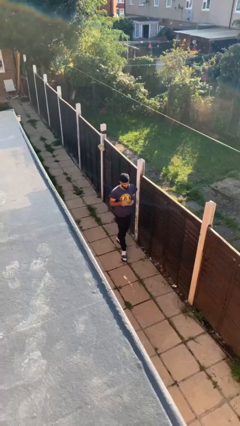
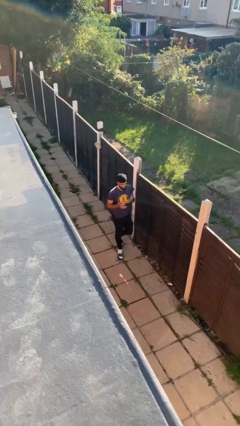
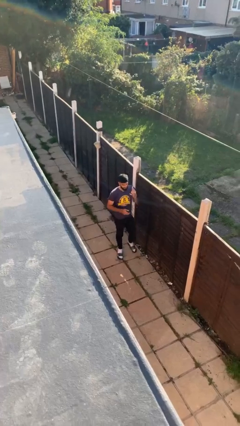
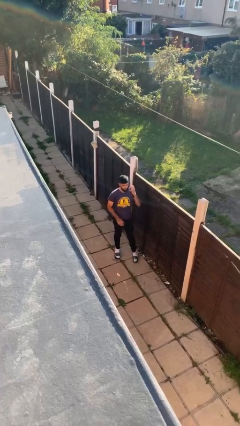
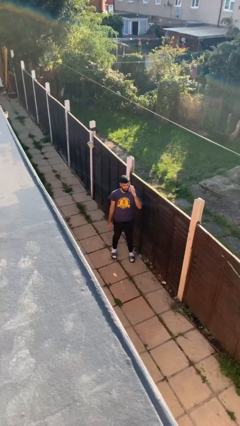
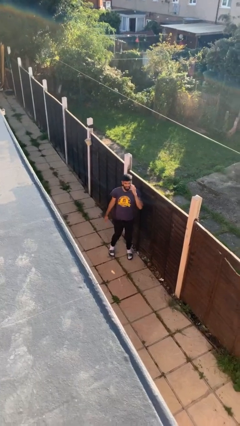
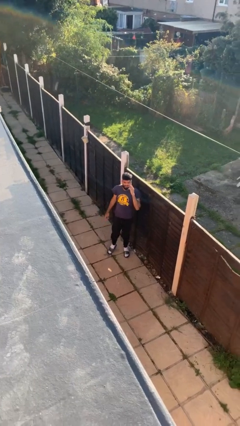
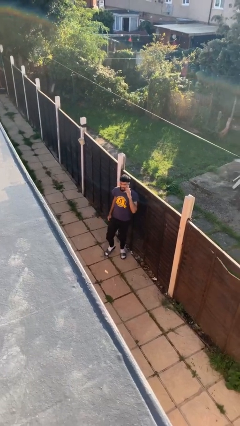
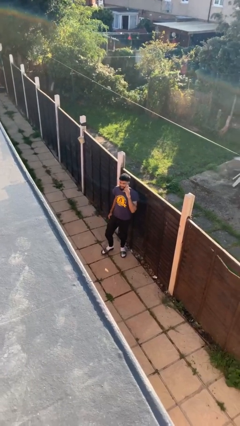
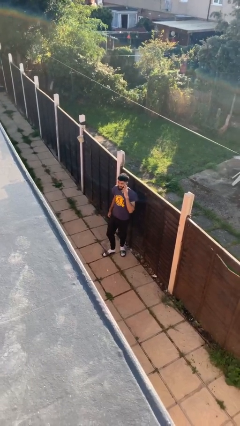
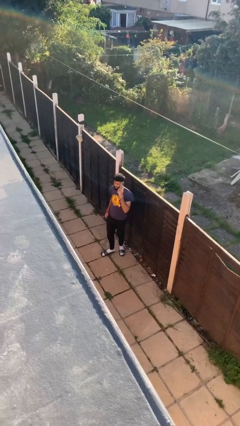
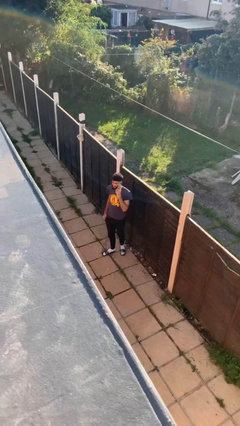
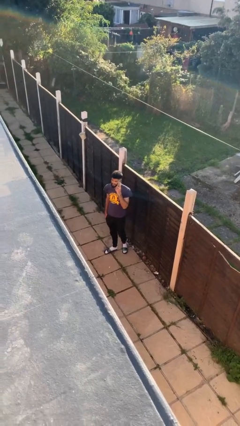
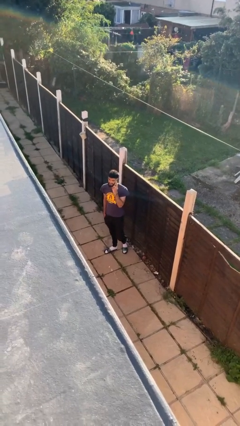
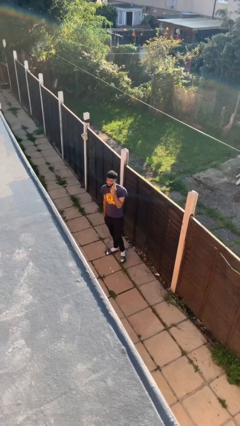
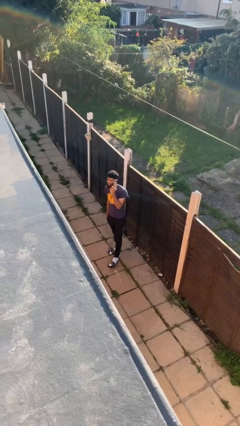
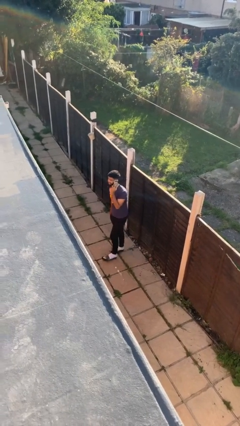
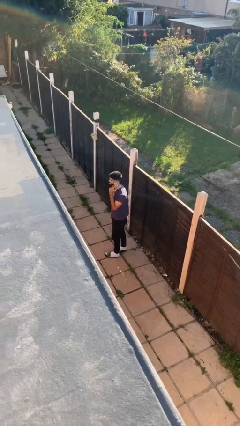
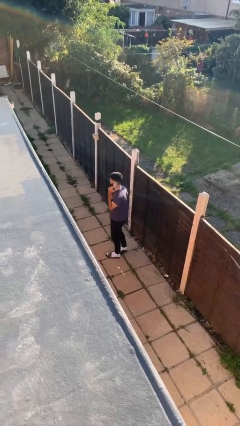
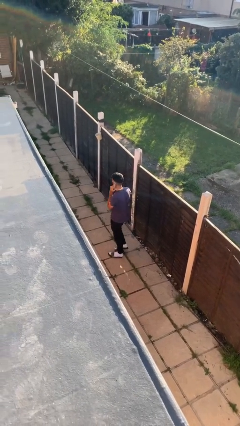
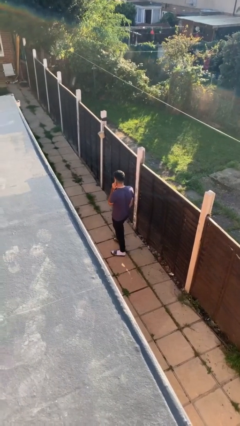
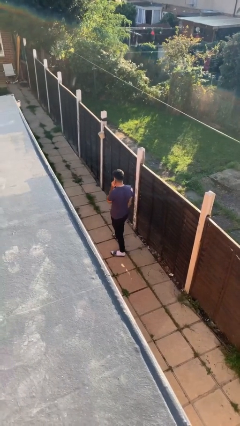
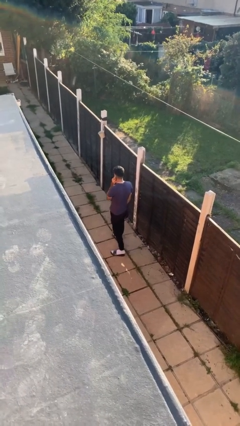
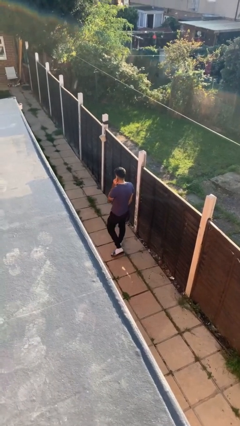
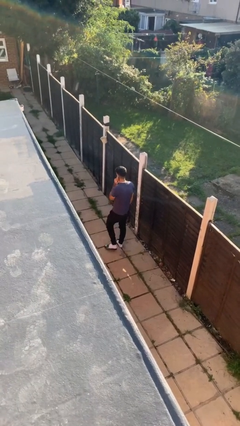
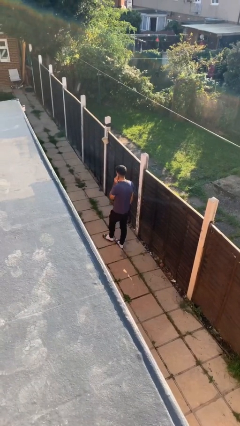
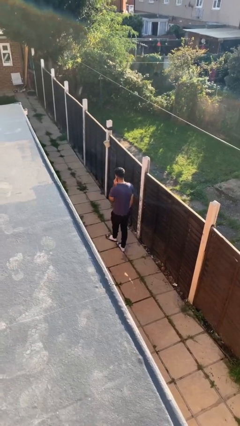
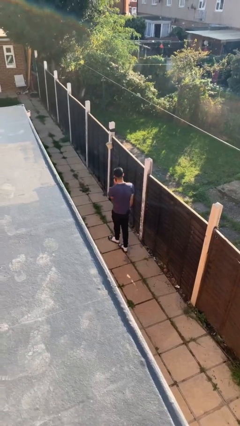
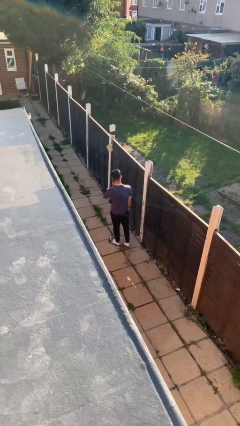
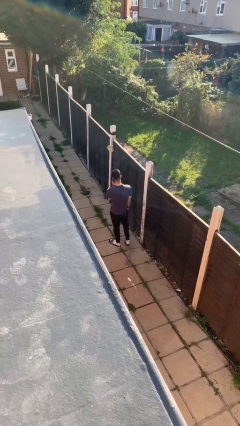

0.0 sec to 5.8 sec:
person talks on phone

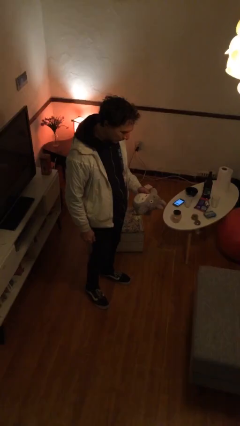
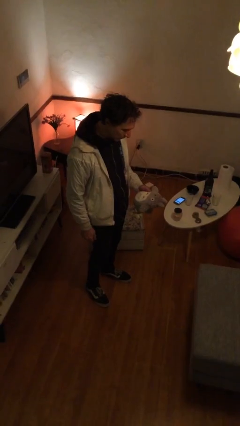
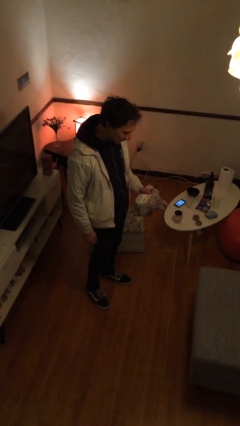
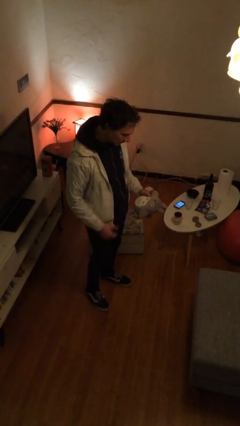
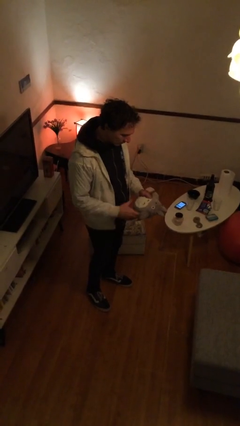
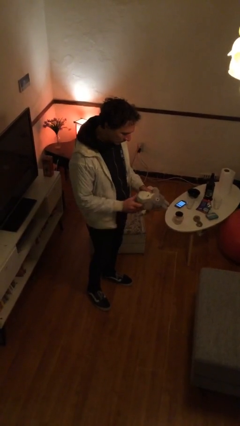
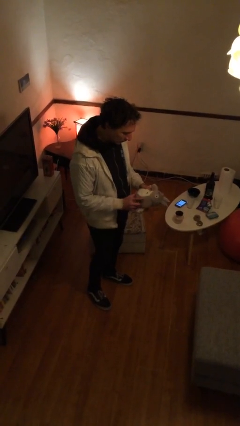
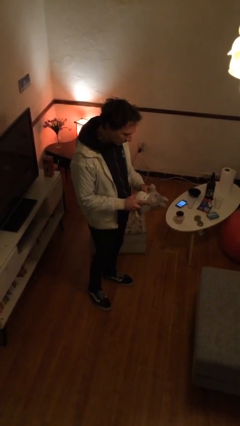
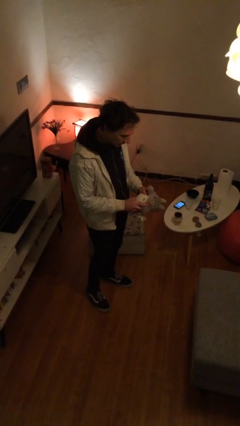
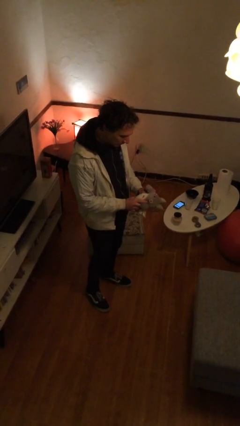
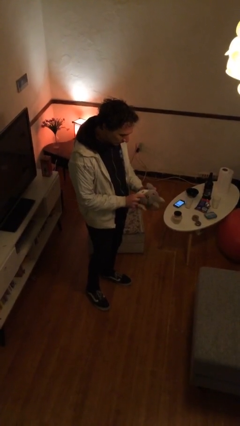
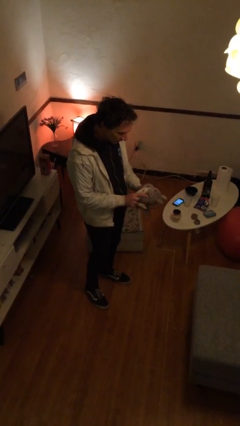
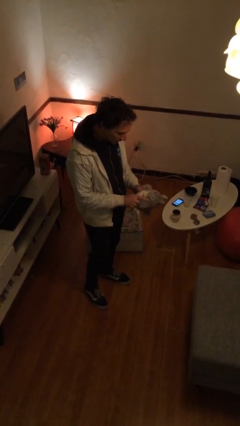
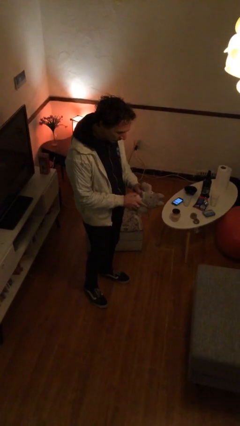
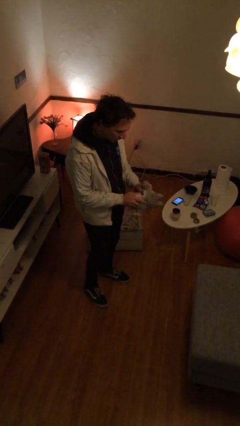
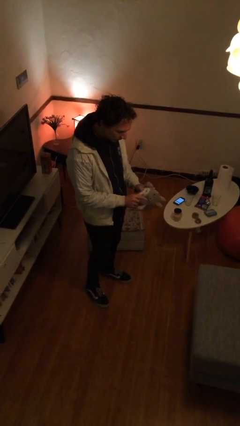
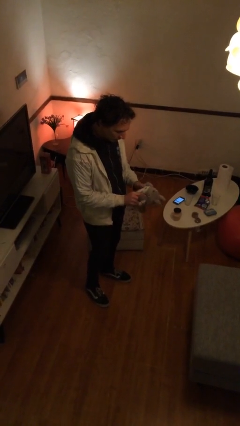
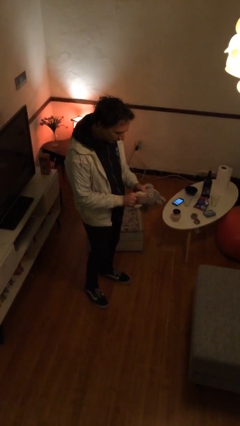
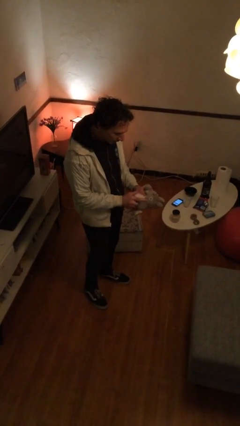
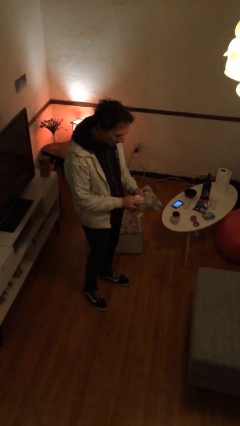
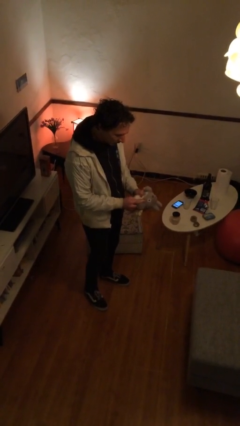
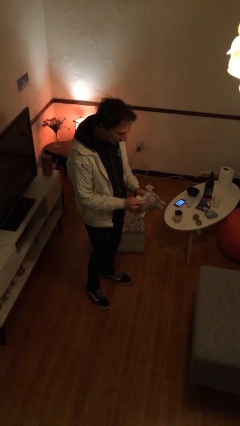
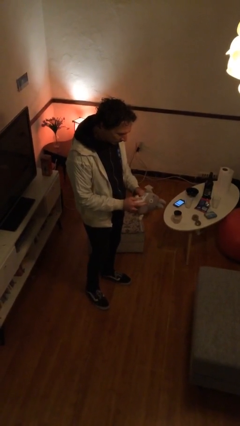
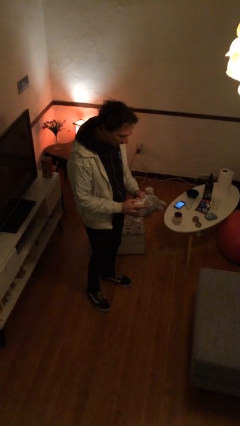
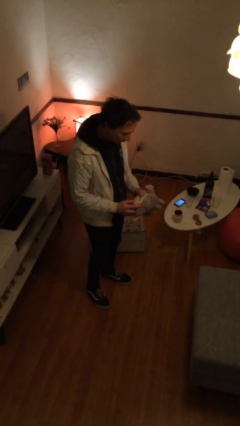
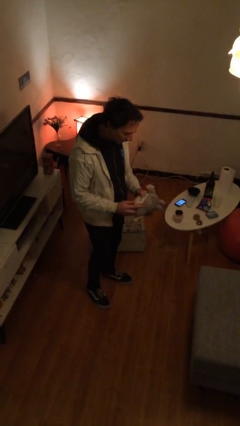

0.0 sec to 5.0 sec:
person squeezes object

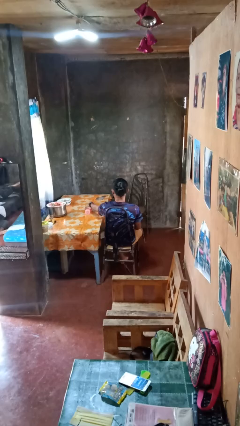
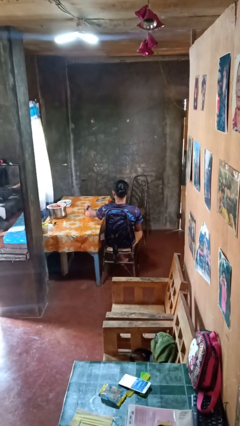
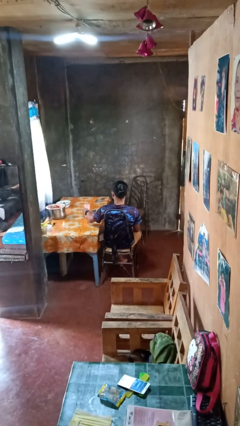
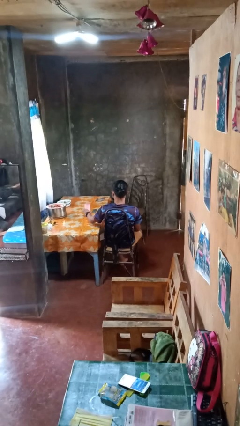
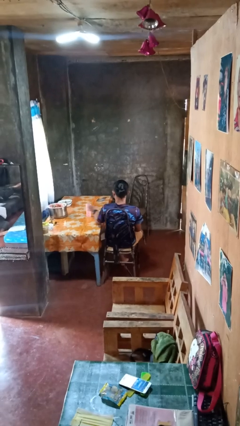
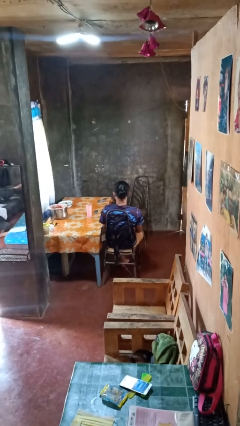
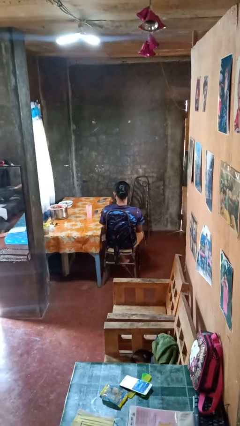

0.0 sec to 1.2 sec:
person sets upright glass

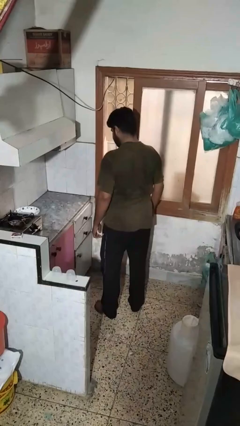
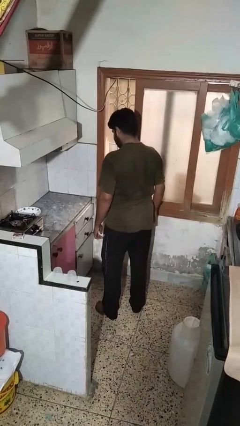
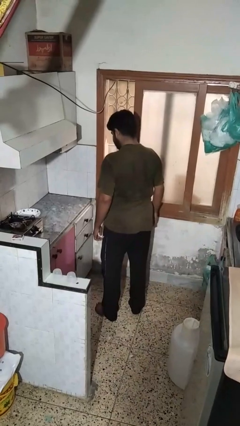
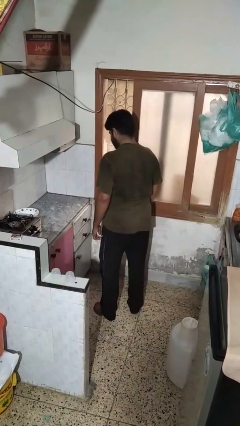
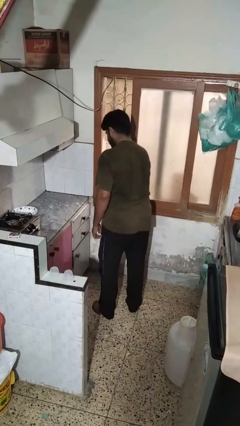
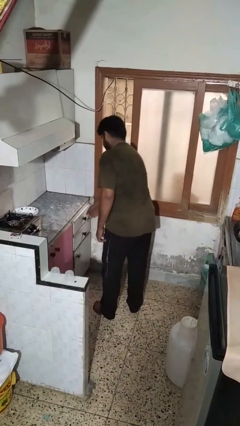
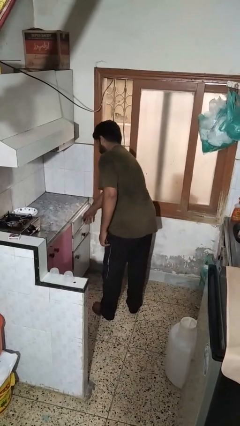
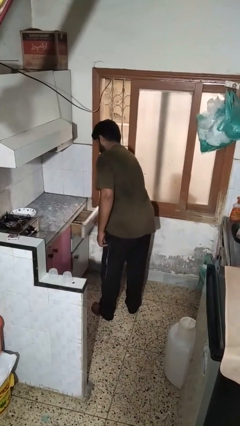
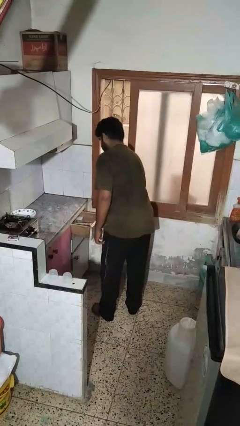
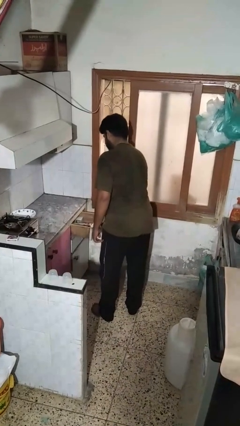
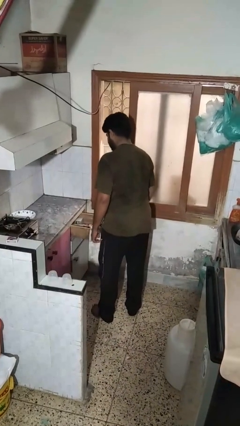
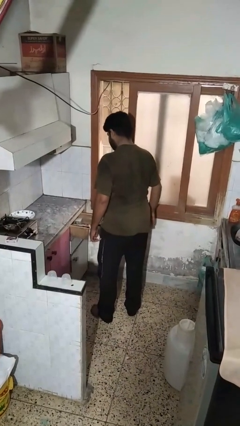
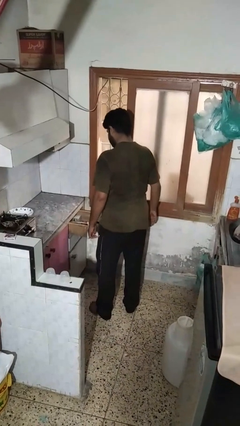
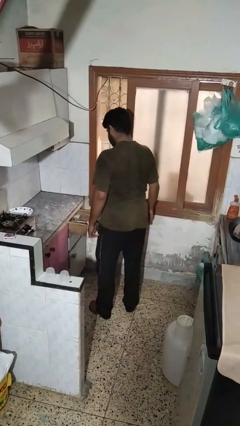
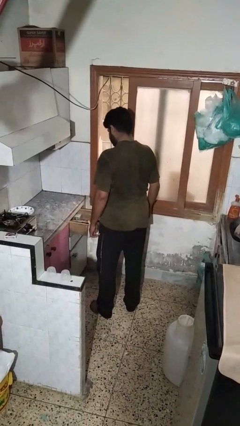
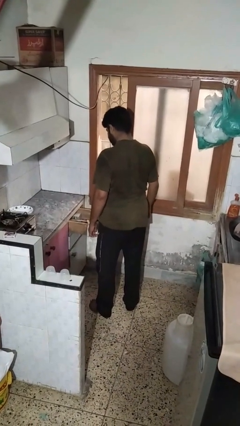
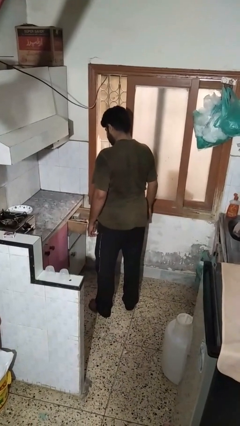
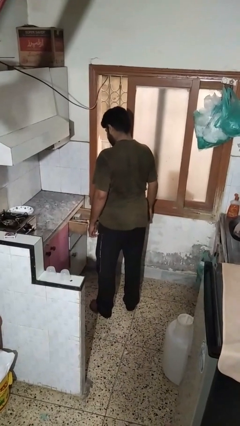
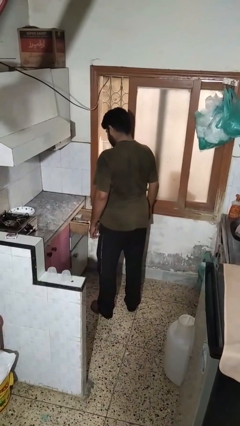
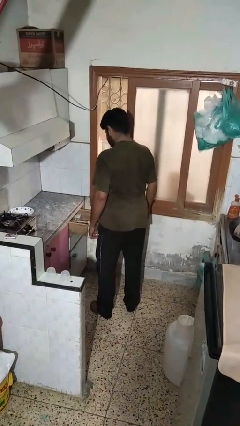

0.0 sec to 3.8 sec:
person opens kitchen drawer

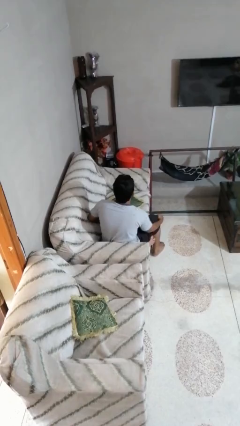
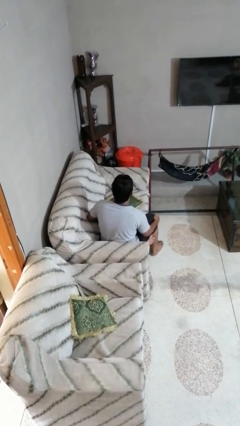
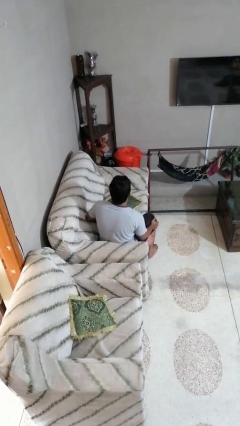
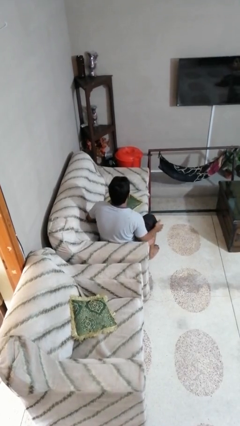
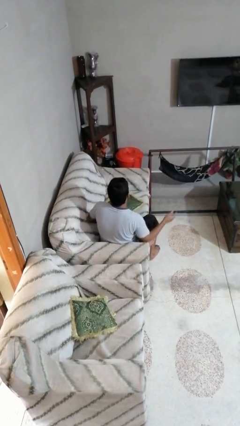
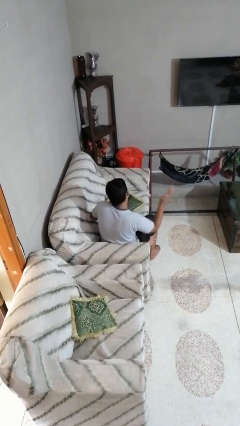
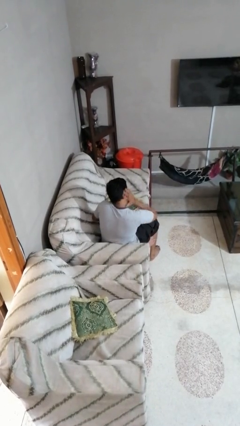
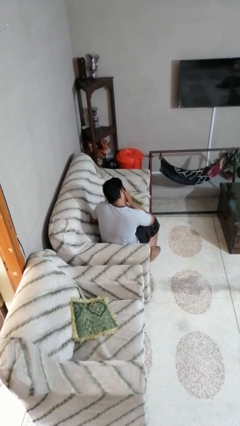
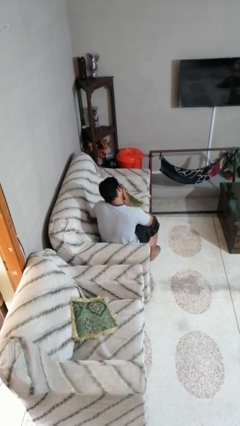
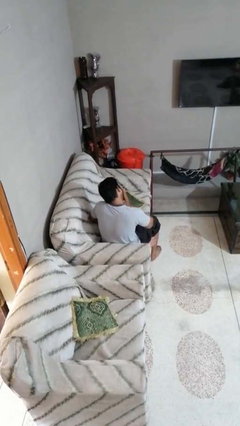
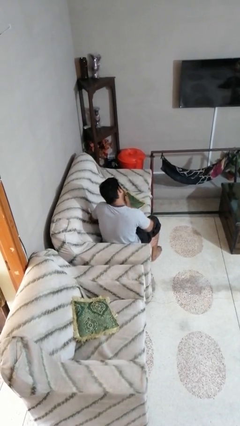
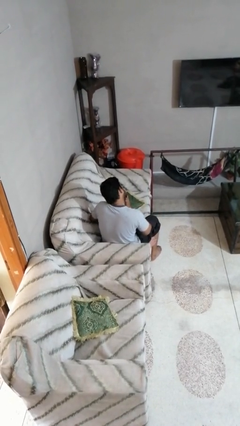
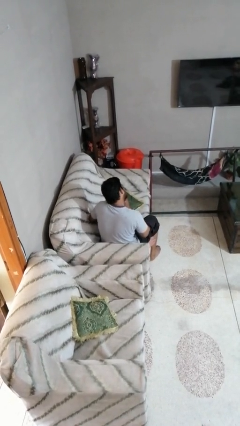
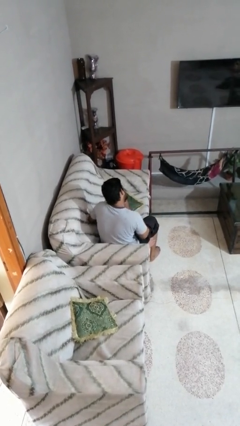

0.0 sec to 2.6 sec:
person swats bug
